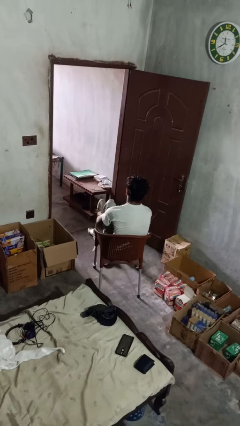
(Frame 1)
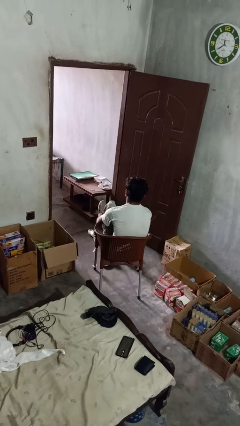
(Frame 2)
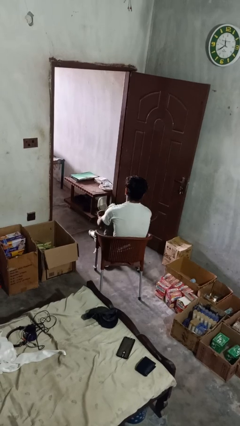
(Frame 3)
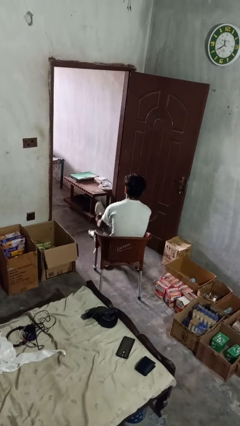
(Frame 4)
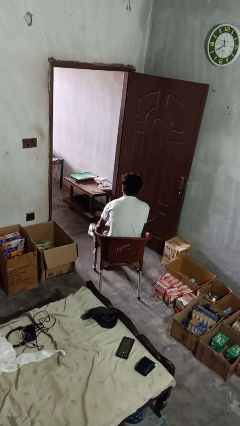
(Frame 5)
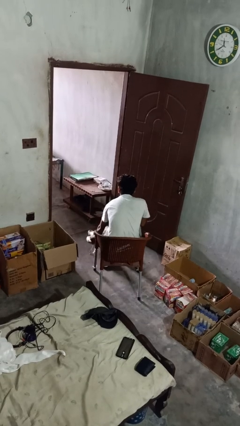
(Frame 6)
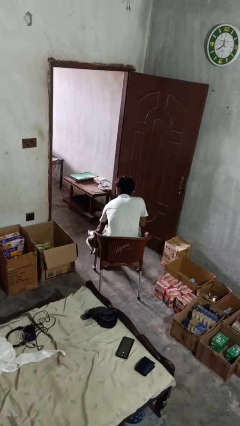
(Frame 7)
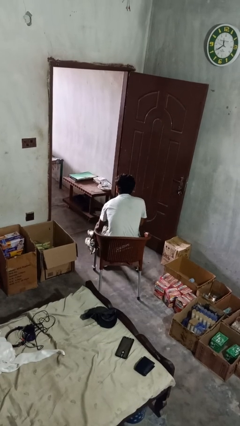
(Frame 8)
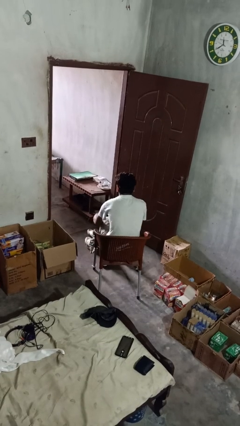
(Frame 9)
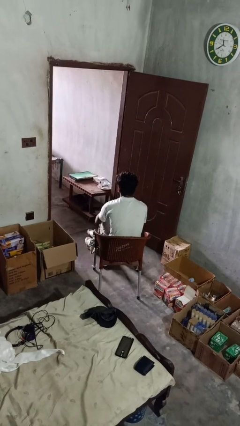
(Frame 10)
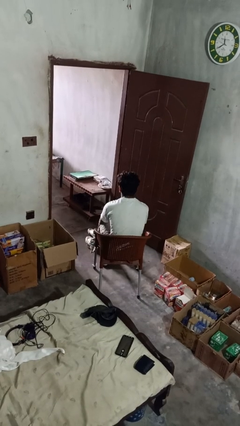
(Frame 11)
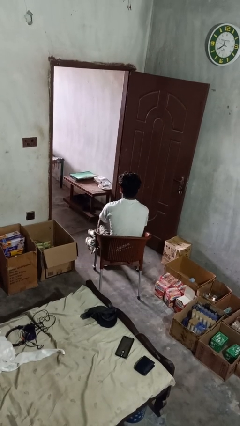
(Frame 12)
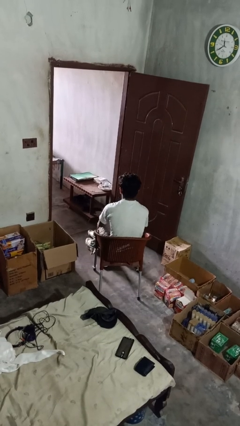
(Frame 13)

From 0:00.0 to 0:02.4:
person takes off shoes

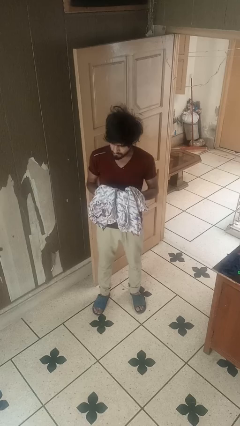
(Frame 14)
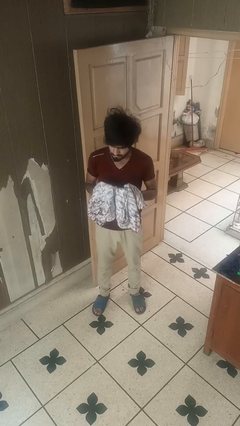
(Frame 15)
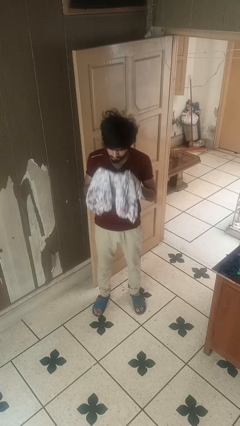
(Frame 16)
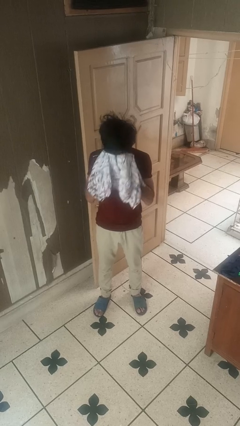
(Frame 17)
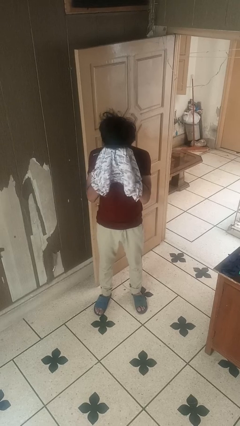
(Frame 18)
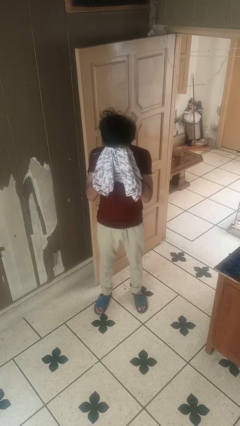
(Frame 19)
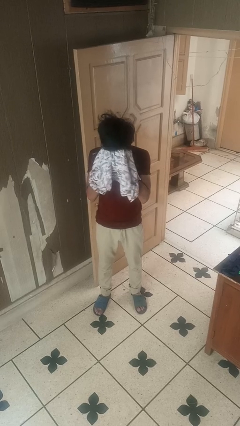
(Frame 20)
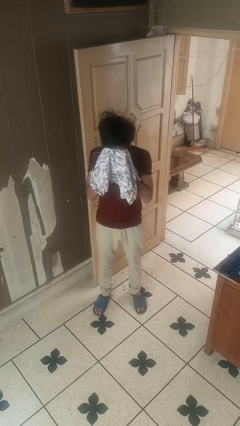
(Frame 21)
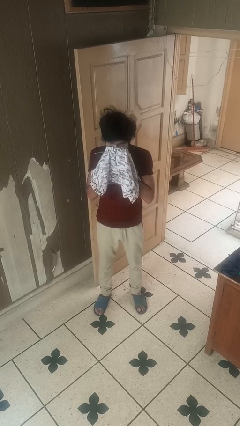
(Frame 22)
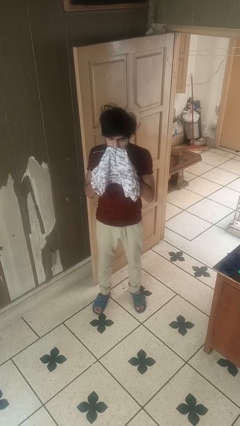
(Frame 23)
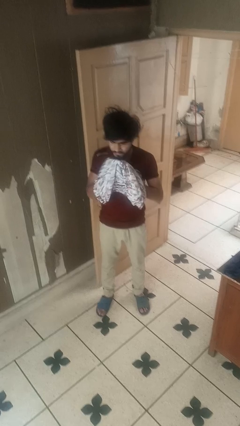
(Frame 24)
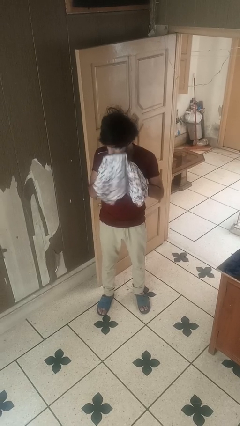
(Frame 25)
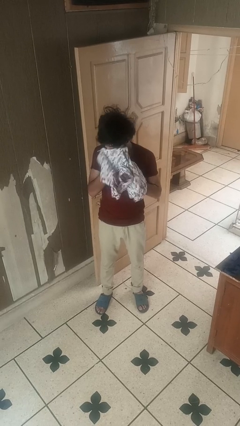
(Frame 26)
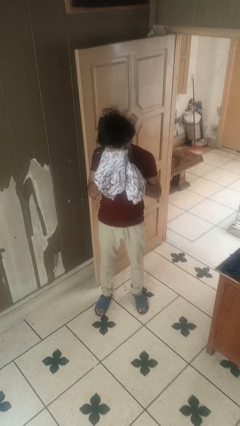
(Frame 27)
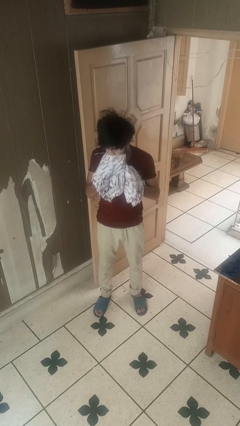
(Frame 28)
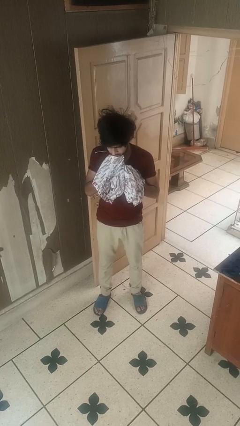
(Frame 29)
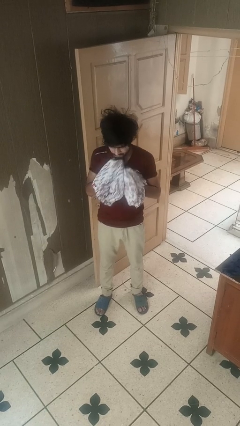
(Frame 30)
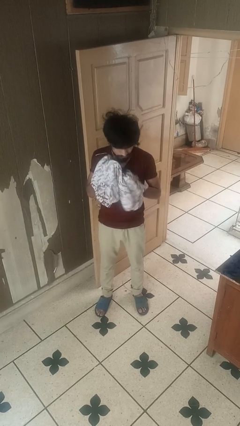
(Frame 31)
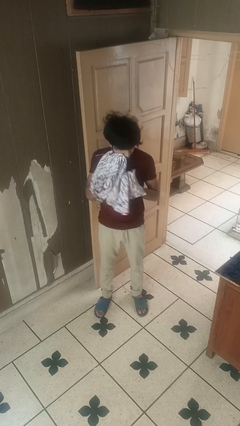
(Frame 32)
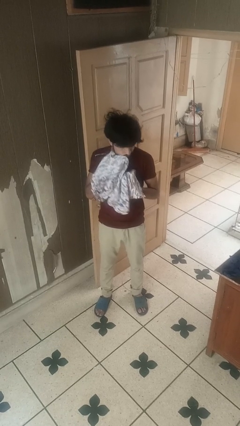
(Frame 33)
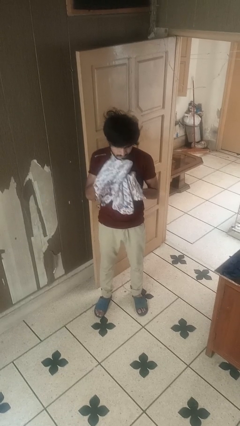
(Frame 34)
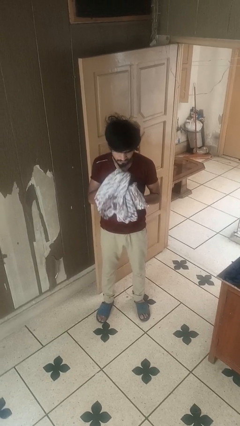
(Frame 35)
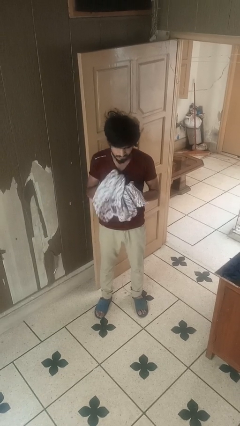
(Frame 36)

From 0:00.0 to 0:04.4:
person wipes mouth with napkin

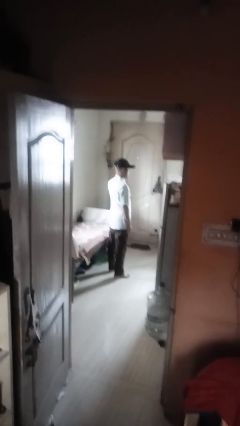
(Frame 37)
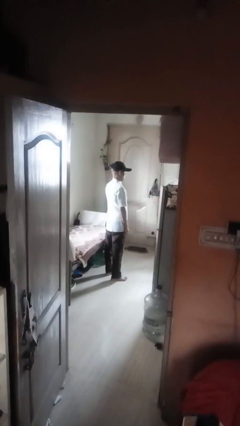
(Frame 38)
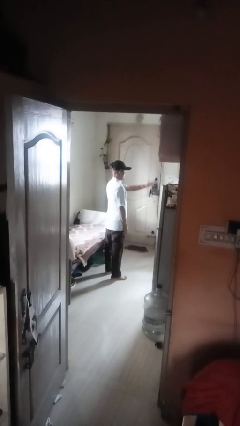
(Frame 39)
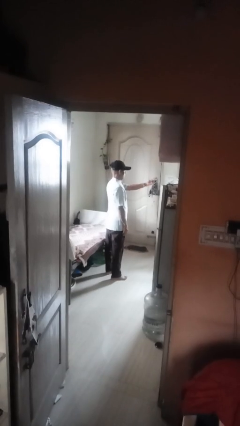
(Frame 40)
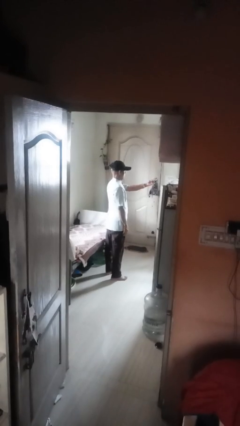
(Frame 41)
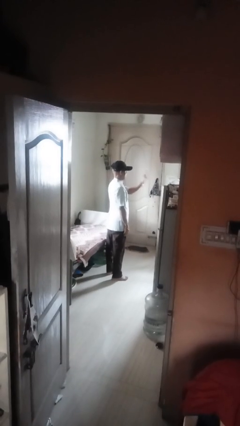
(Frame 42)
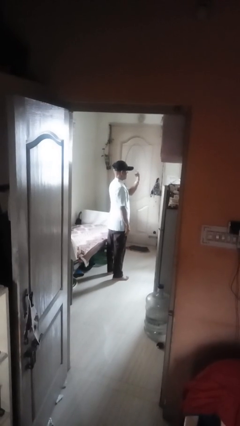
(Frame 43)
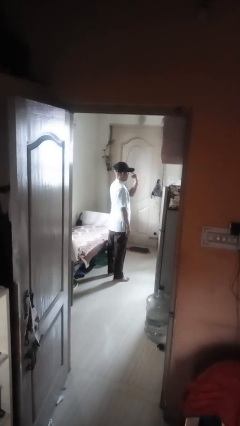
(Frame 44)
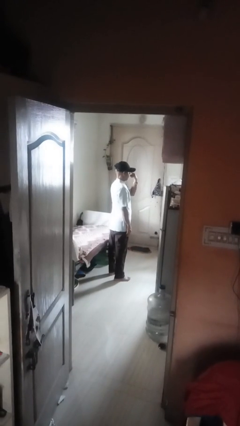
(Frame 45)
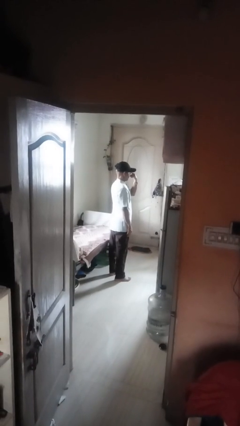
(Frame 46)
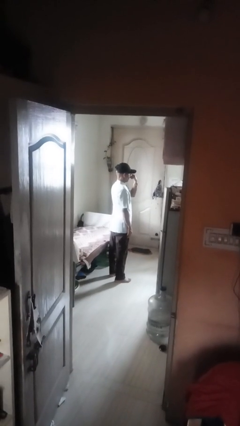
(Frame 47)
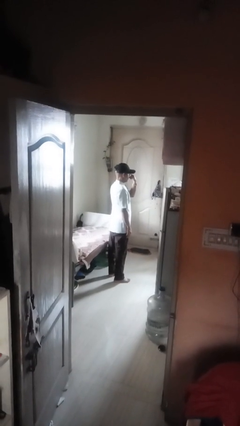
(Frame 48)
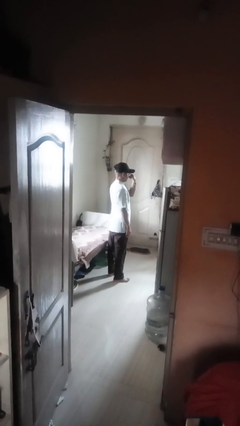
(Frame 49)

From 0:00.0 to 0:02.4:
person gestures watch closely

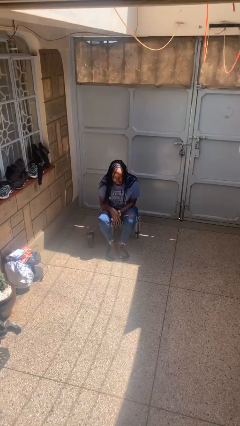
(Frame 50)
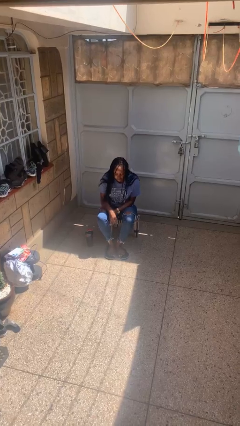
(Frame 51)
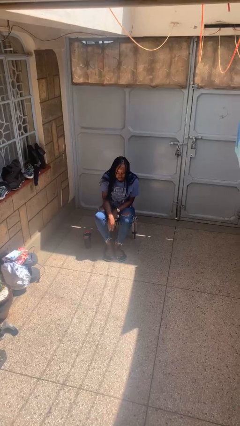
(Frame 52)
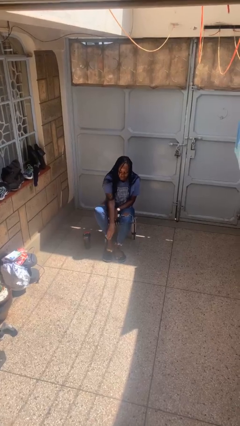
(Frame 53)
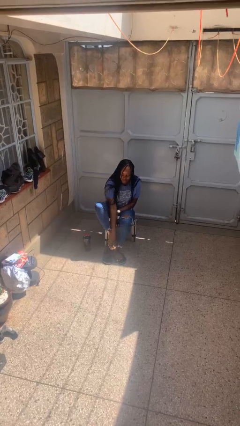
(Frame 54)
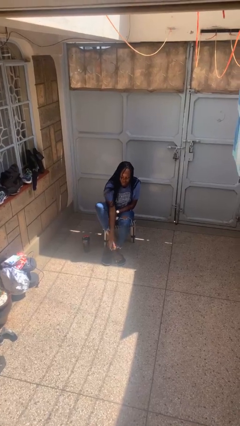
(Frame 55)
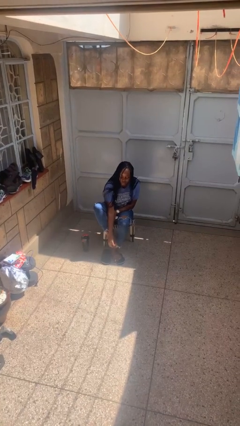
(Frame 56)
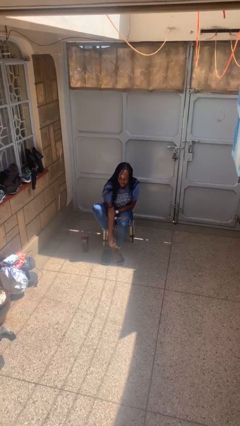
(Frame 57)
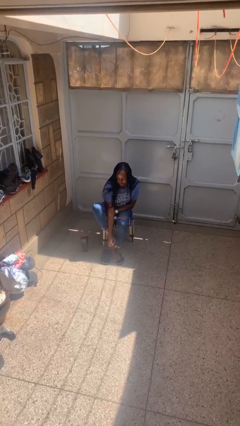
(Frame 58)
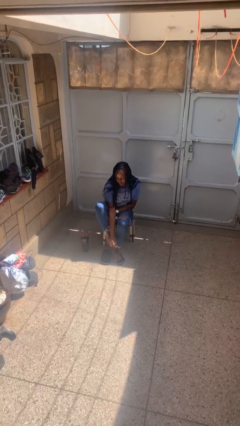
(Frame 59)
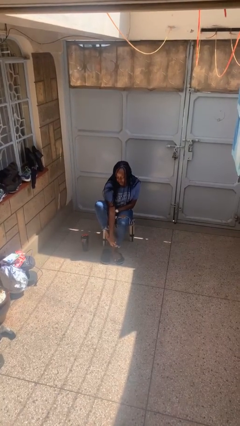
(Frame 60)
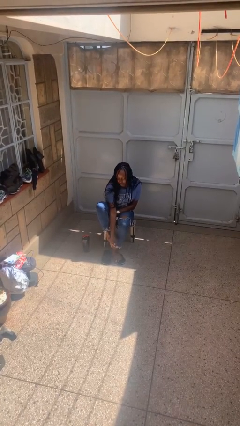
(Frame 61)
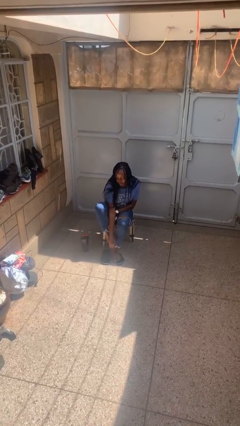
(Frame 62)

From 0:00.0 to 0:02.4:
person rubs foot

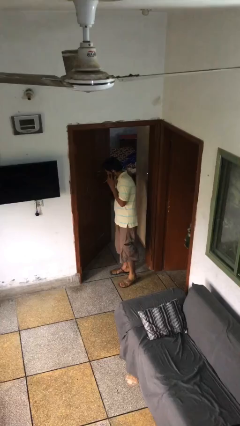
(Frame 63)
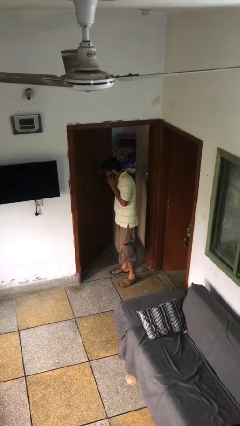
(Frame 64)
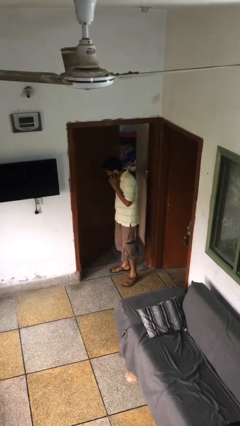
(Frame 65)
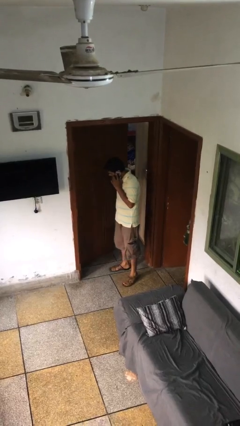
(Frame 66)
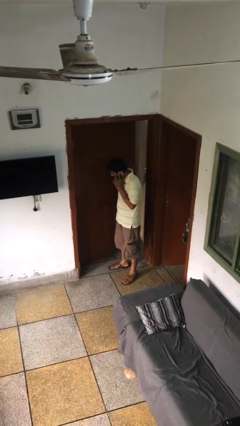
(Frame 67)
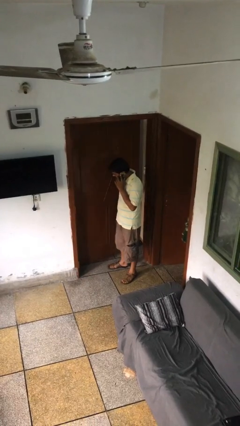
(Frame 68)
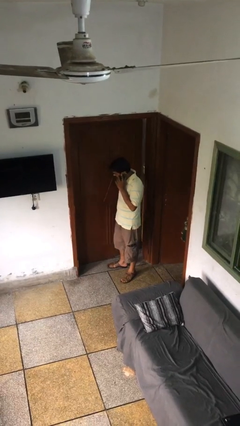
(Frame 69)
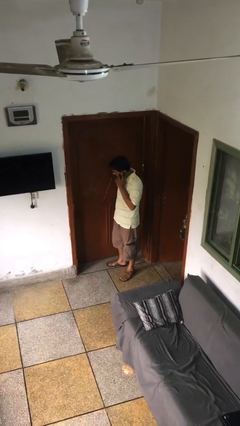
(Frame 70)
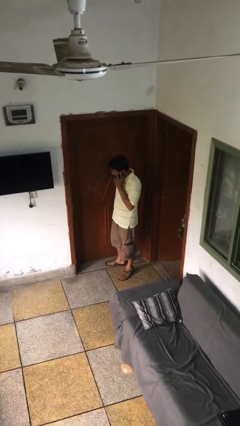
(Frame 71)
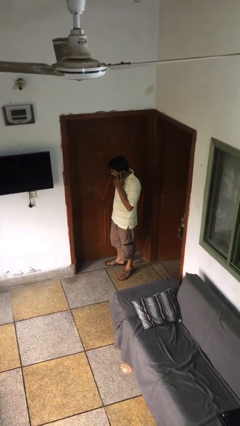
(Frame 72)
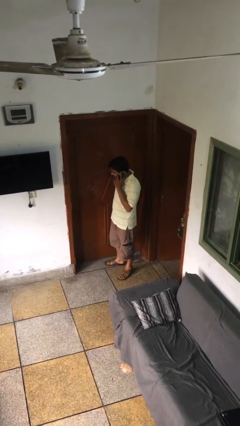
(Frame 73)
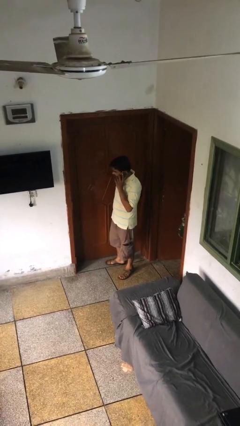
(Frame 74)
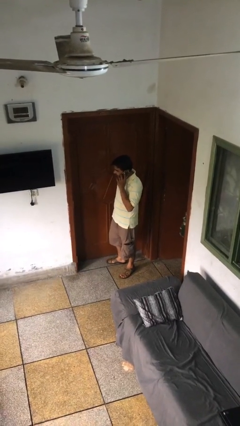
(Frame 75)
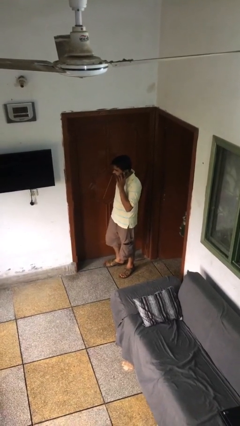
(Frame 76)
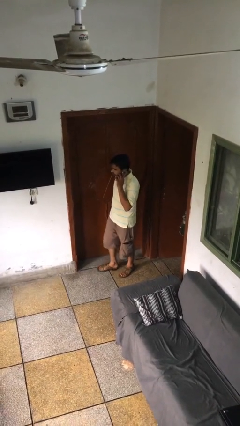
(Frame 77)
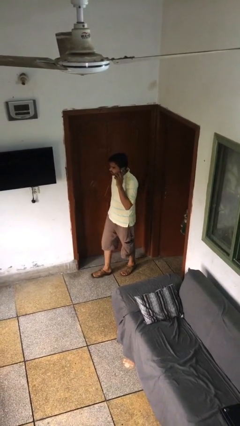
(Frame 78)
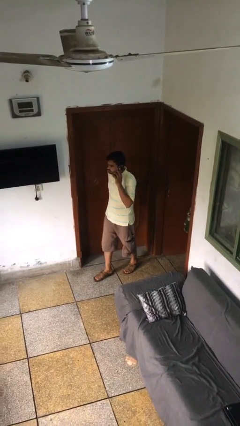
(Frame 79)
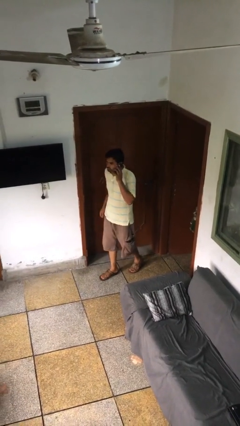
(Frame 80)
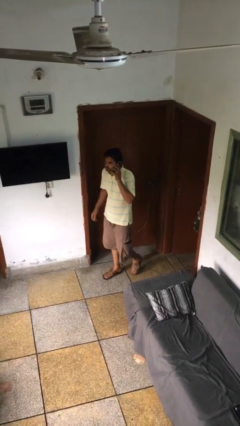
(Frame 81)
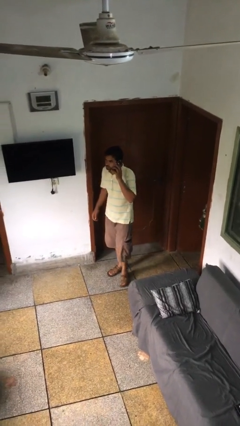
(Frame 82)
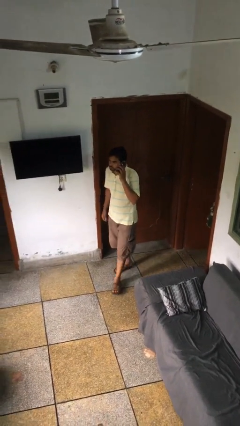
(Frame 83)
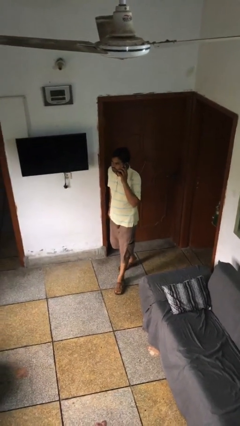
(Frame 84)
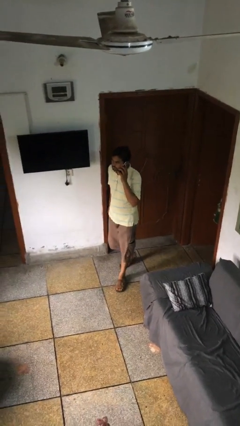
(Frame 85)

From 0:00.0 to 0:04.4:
person closes facility door

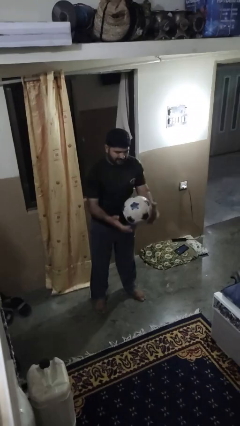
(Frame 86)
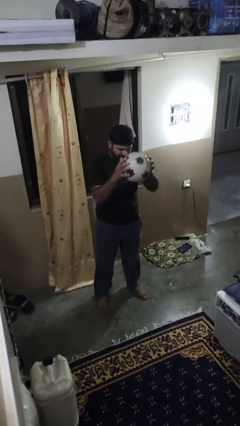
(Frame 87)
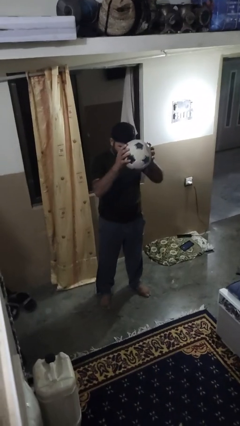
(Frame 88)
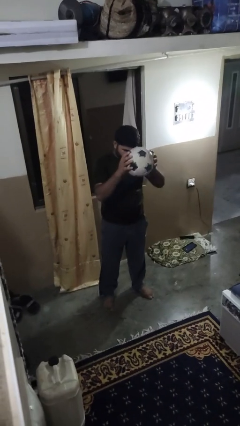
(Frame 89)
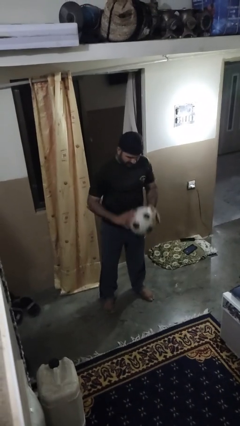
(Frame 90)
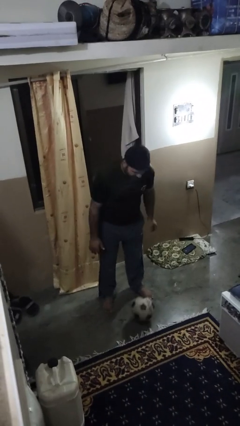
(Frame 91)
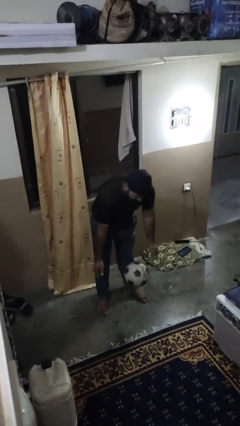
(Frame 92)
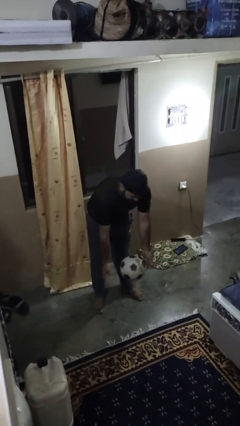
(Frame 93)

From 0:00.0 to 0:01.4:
person bounces ball on floor
